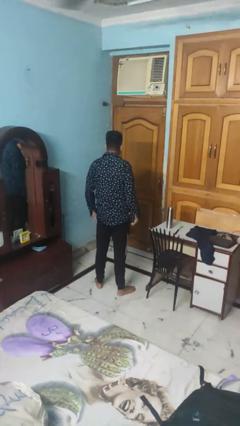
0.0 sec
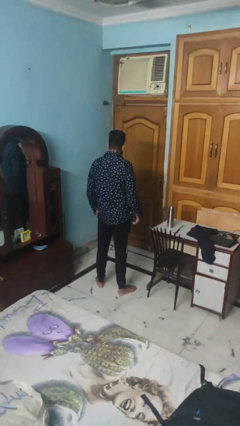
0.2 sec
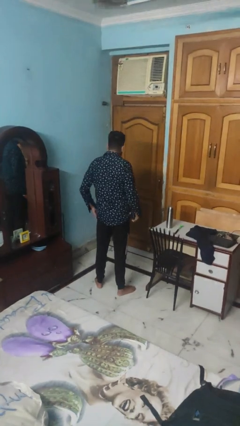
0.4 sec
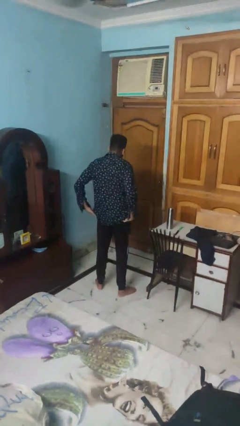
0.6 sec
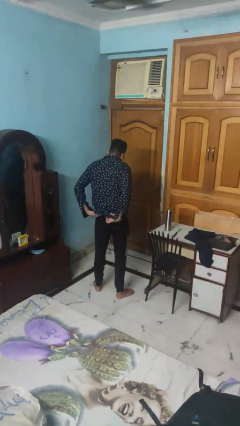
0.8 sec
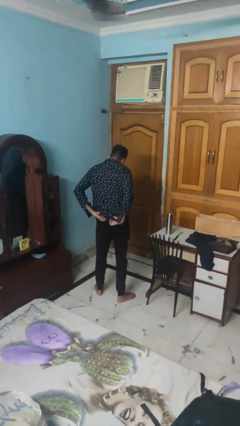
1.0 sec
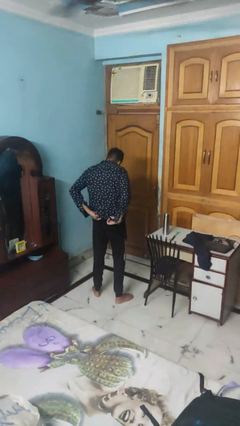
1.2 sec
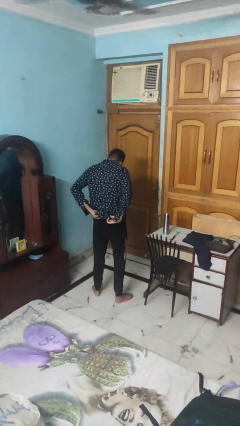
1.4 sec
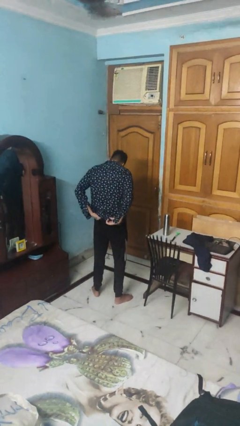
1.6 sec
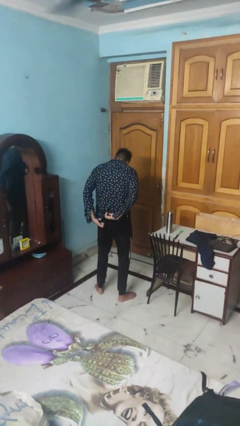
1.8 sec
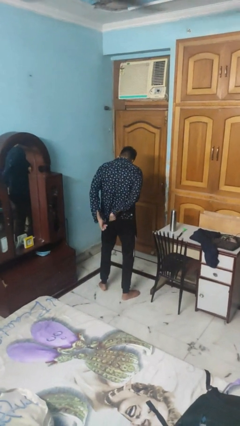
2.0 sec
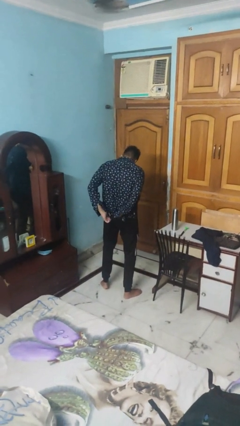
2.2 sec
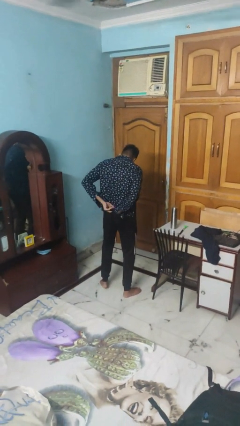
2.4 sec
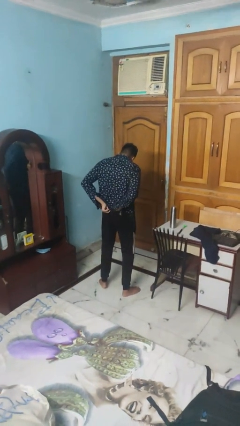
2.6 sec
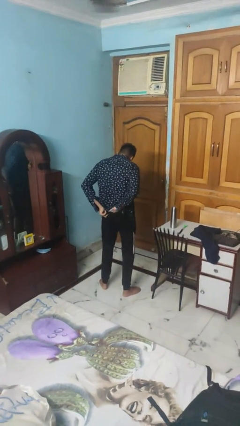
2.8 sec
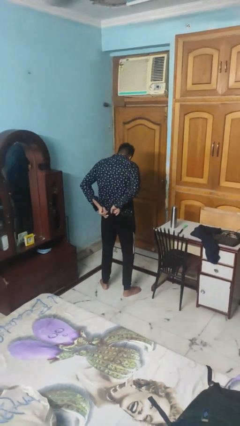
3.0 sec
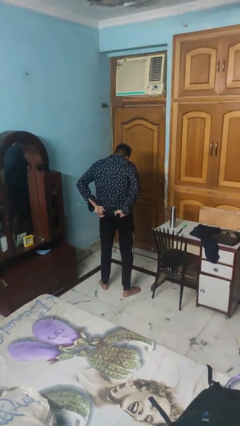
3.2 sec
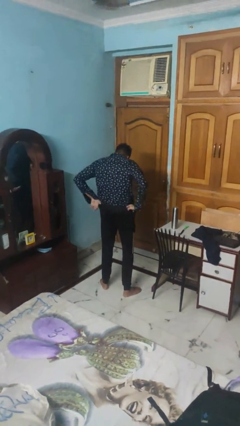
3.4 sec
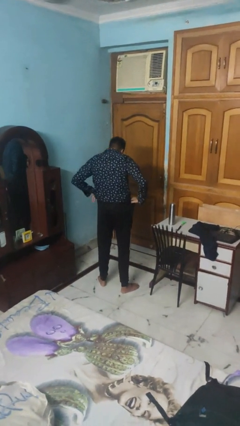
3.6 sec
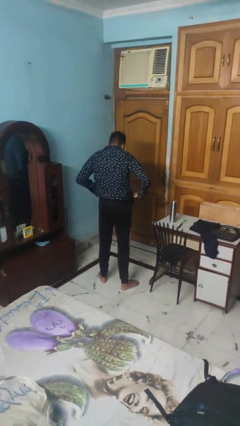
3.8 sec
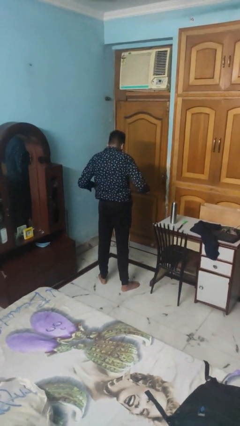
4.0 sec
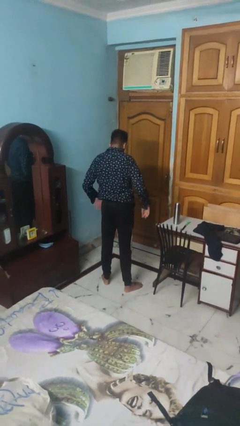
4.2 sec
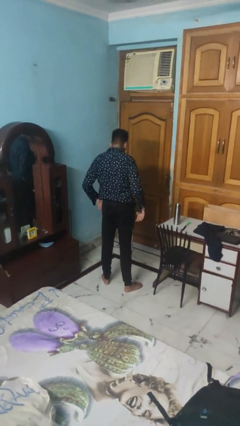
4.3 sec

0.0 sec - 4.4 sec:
person tucks in shirt

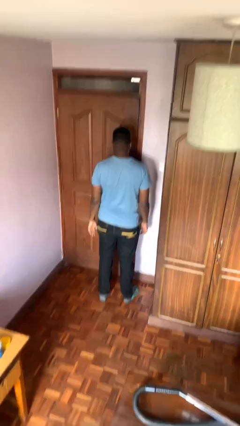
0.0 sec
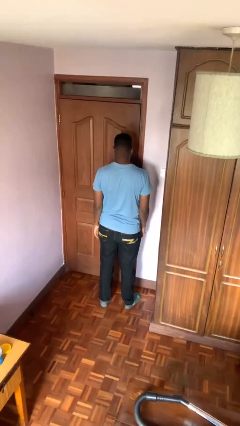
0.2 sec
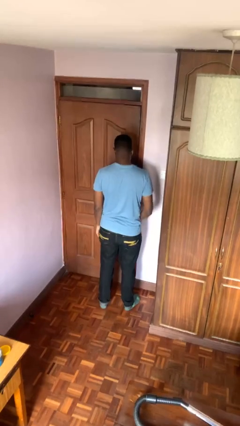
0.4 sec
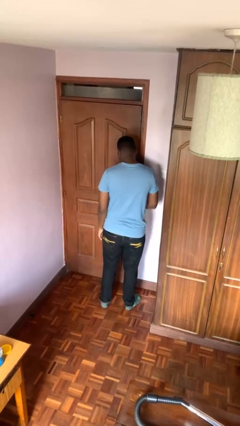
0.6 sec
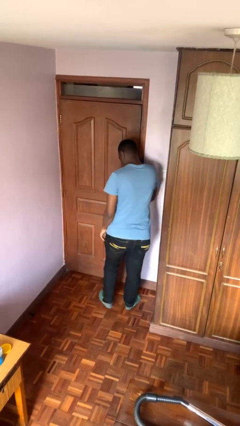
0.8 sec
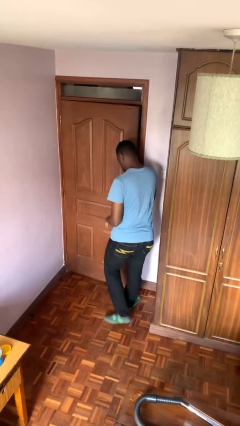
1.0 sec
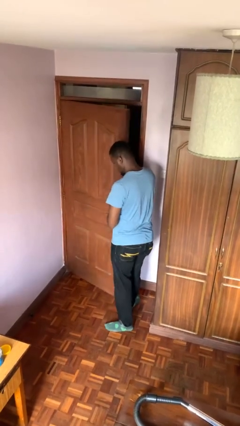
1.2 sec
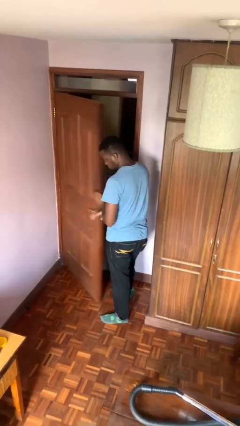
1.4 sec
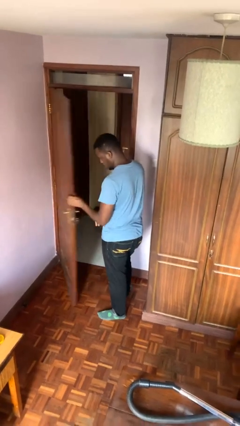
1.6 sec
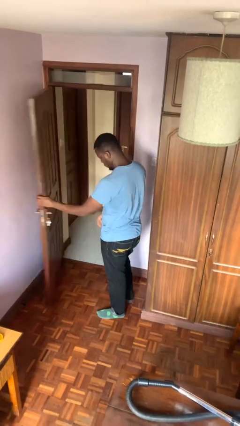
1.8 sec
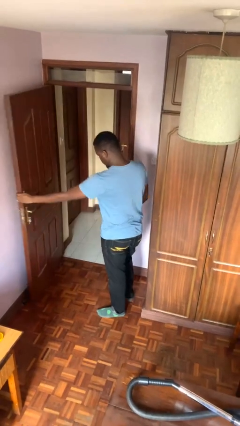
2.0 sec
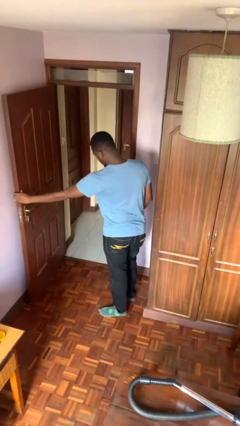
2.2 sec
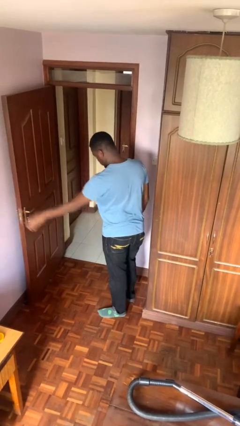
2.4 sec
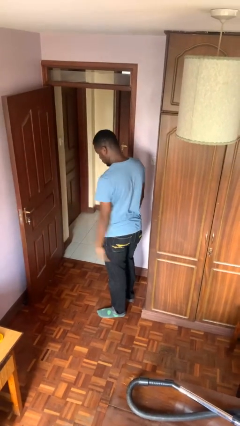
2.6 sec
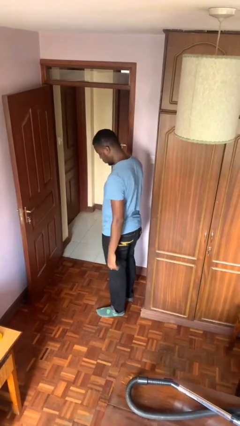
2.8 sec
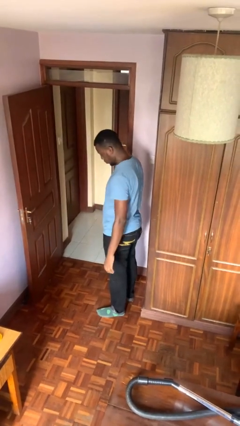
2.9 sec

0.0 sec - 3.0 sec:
person opens facility door

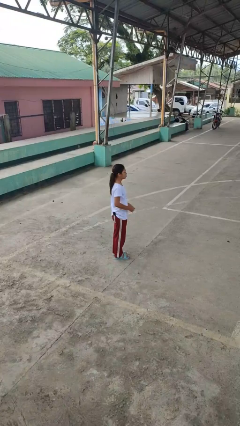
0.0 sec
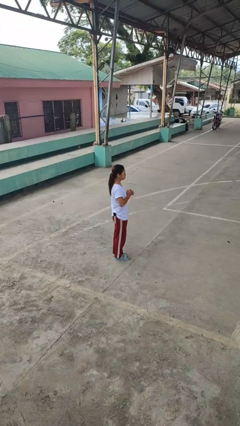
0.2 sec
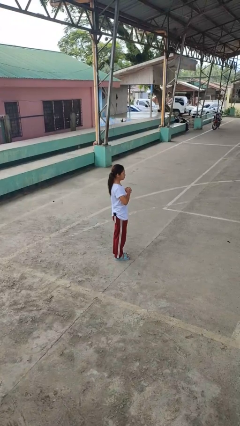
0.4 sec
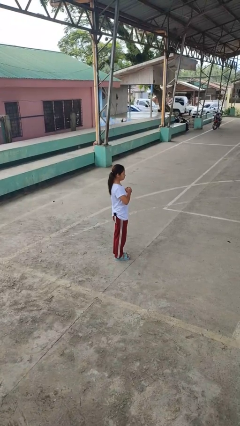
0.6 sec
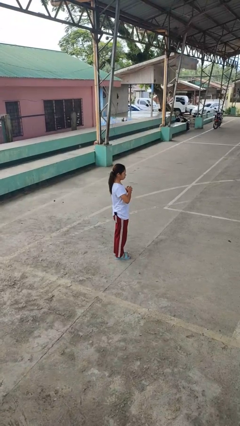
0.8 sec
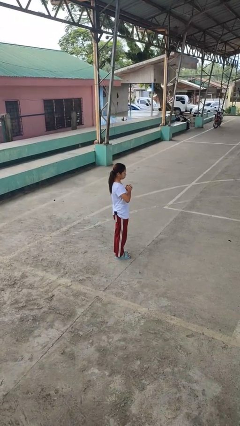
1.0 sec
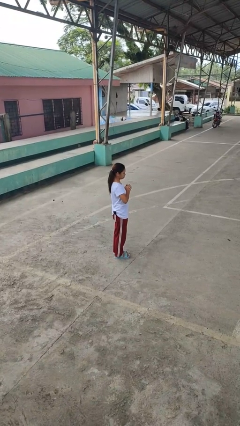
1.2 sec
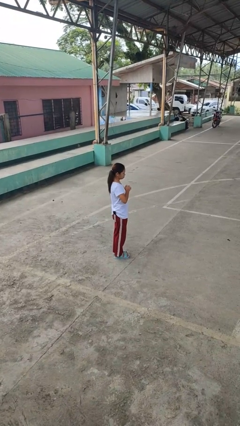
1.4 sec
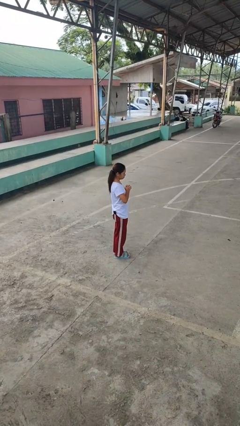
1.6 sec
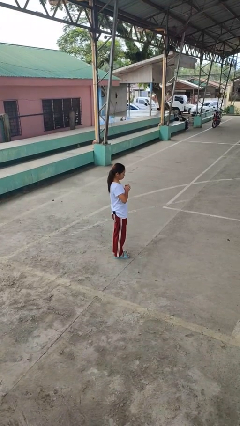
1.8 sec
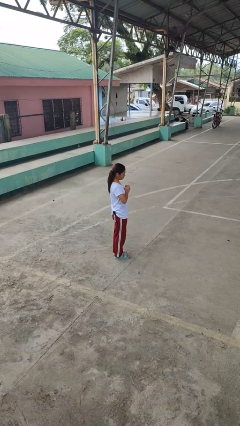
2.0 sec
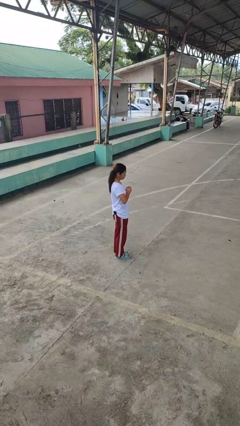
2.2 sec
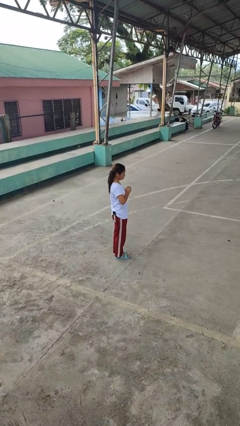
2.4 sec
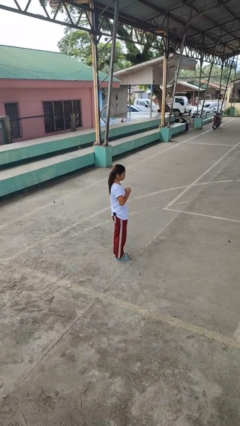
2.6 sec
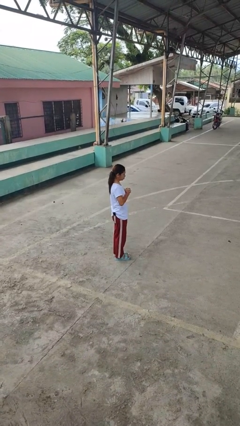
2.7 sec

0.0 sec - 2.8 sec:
person cracks knuckles

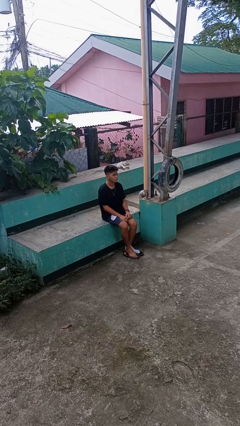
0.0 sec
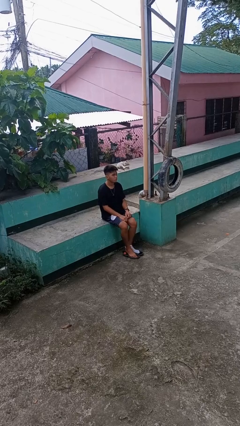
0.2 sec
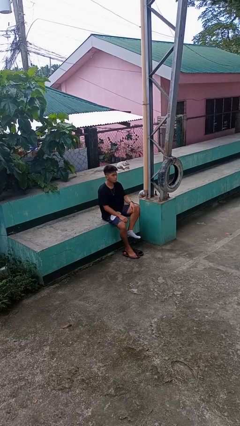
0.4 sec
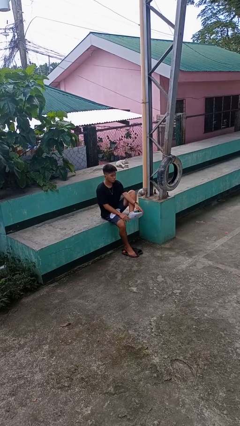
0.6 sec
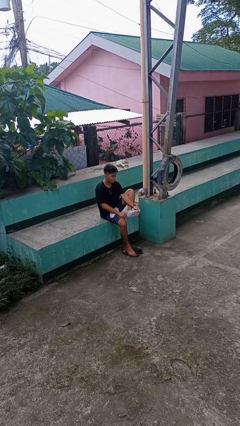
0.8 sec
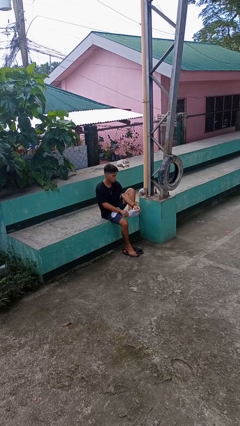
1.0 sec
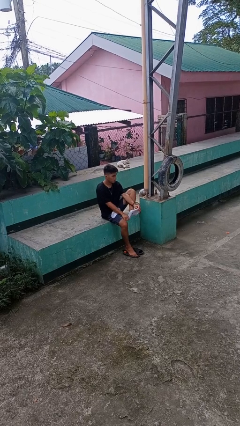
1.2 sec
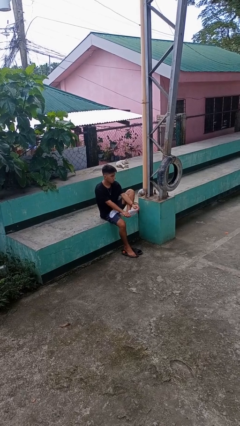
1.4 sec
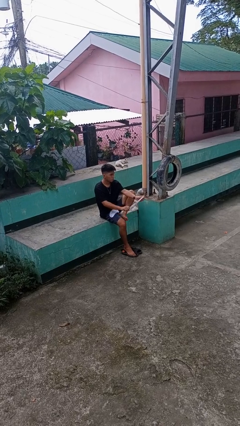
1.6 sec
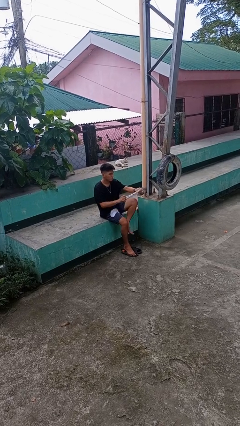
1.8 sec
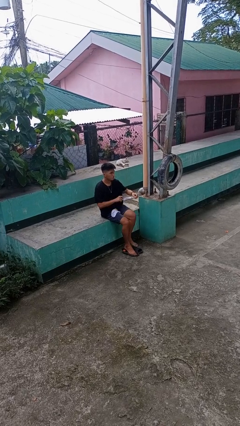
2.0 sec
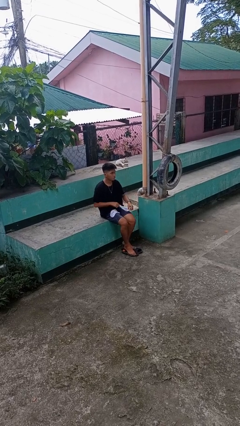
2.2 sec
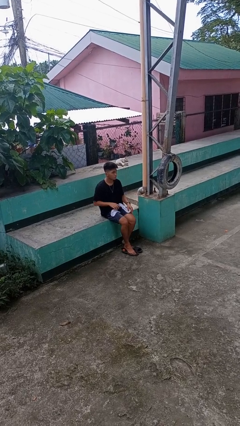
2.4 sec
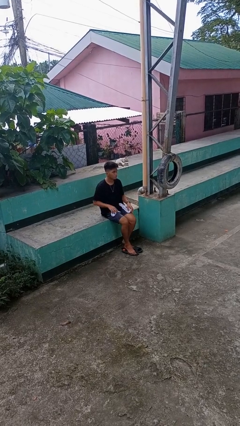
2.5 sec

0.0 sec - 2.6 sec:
person takes off socks

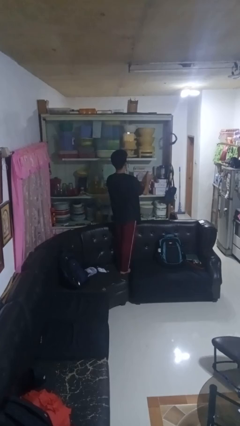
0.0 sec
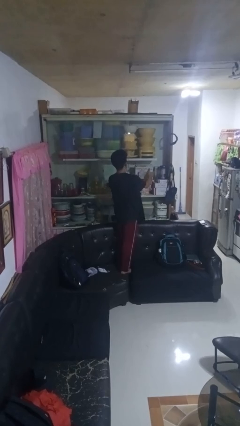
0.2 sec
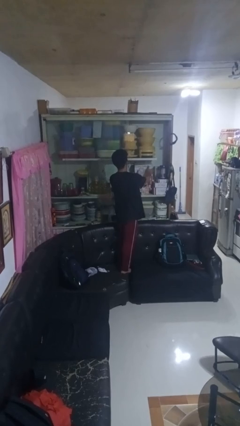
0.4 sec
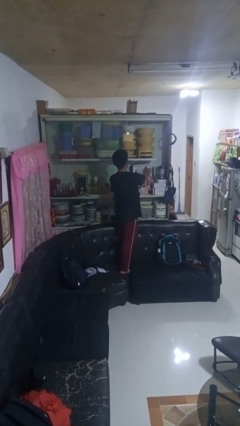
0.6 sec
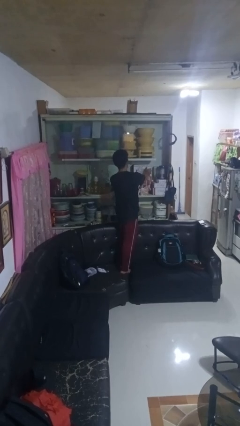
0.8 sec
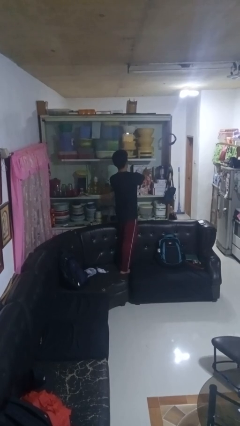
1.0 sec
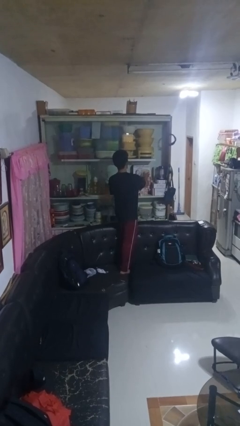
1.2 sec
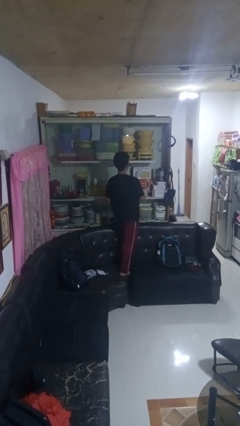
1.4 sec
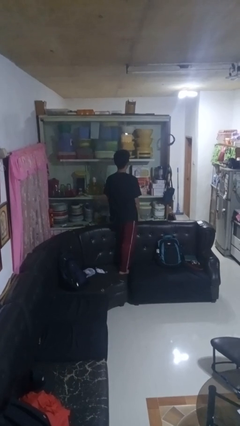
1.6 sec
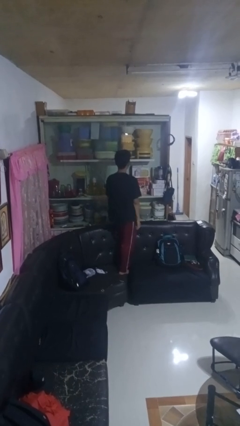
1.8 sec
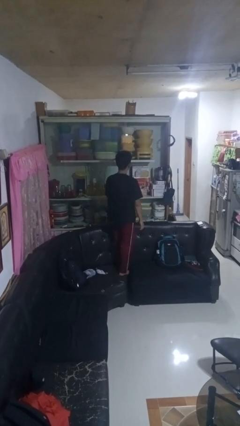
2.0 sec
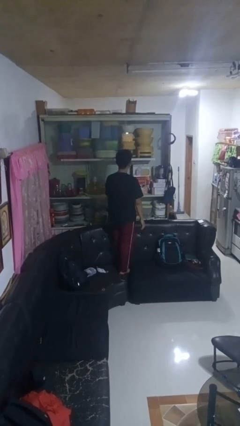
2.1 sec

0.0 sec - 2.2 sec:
person puts down object into cabinet

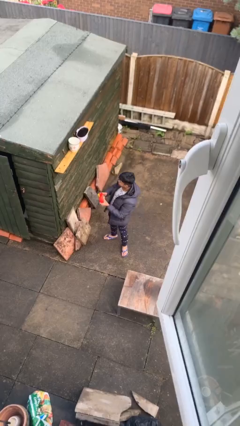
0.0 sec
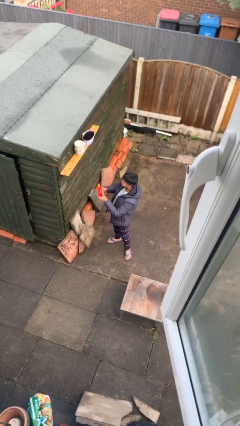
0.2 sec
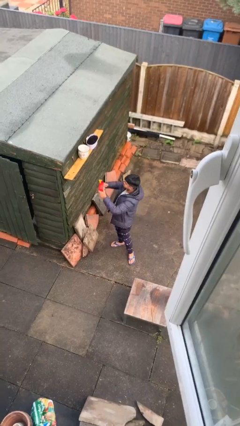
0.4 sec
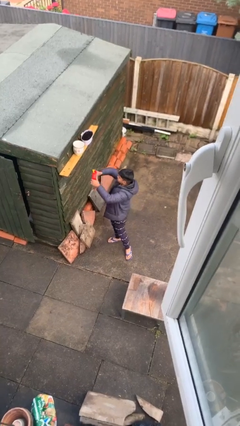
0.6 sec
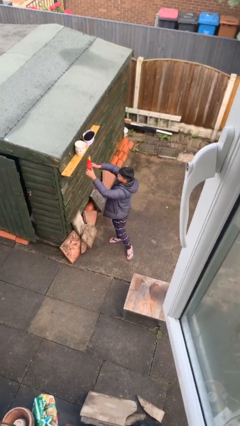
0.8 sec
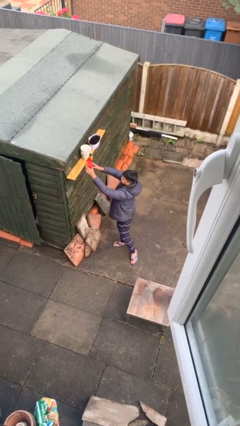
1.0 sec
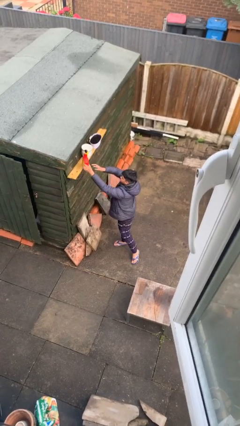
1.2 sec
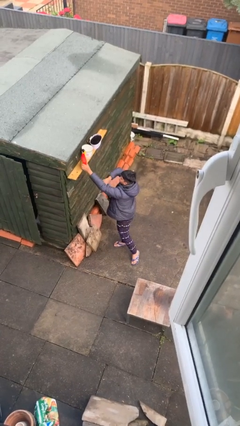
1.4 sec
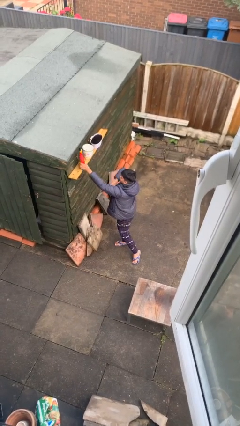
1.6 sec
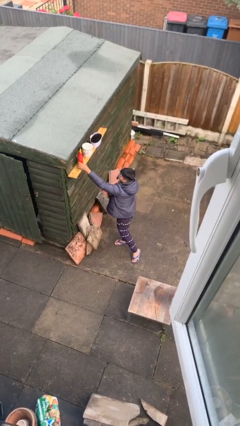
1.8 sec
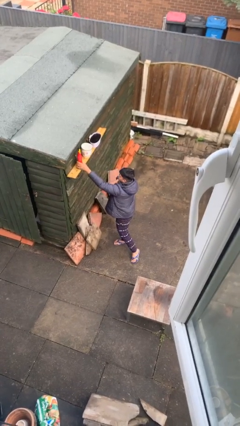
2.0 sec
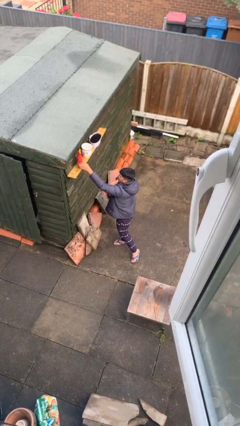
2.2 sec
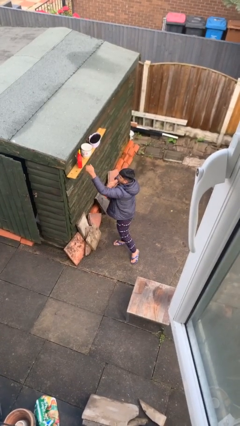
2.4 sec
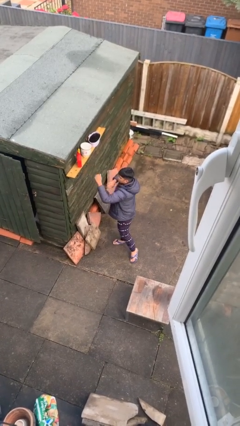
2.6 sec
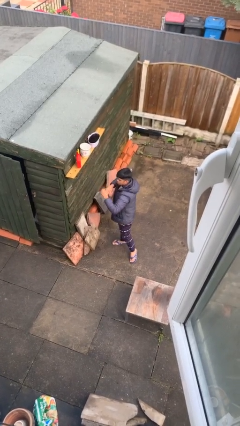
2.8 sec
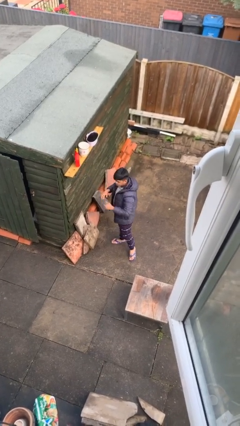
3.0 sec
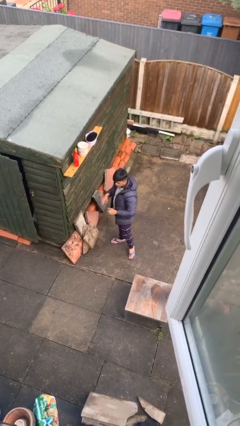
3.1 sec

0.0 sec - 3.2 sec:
person puts down object on shelf
